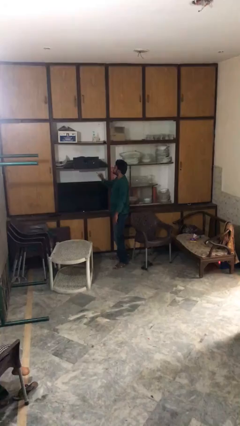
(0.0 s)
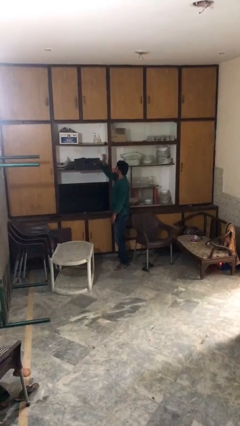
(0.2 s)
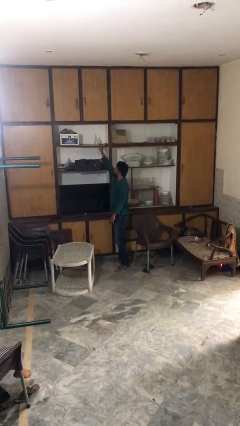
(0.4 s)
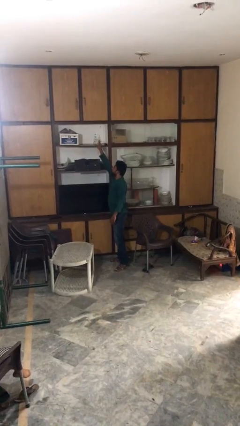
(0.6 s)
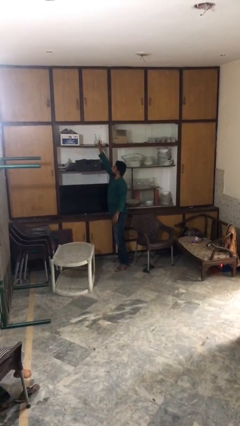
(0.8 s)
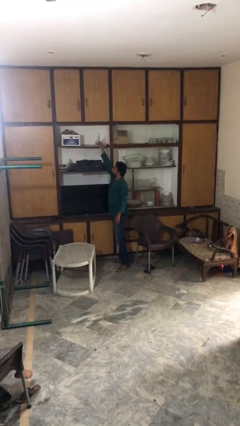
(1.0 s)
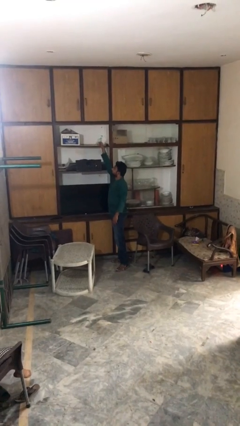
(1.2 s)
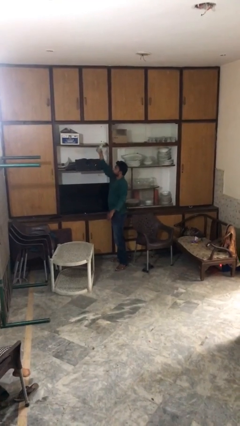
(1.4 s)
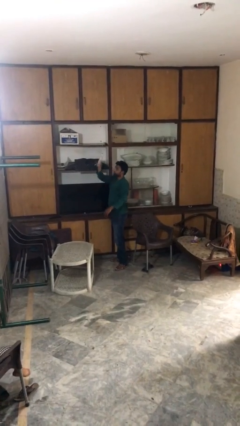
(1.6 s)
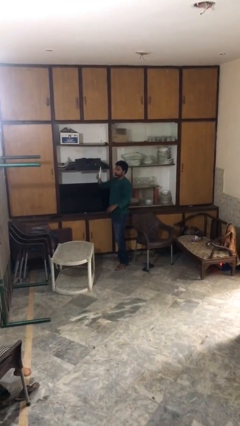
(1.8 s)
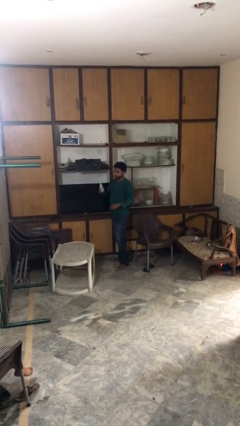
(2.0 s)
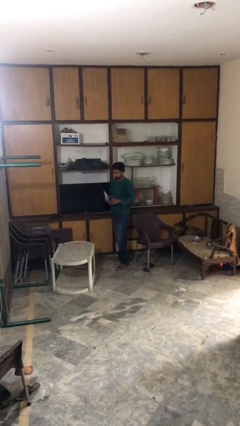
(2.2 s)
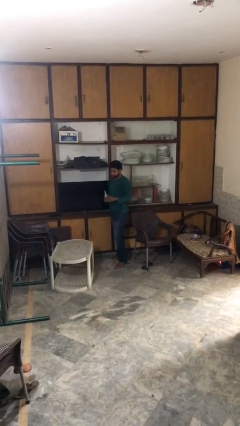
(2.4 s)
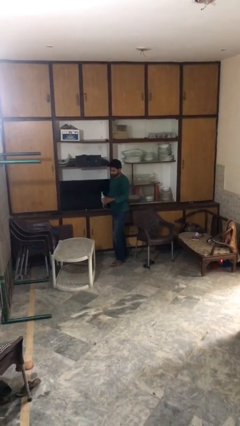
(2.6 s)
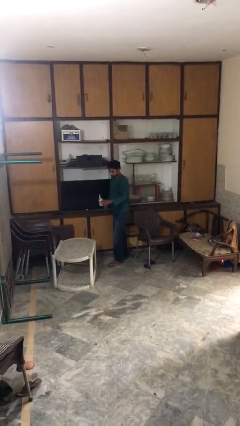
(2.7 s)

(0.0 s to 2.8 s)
person picks up object from shelf

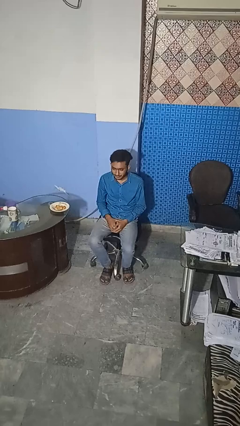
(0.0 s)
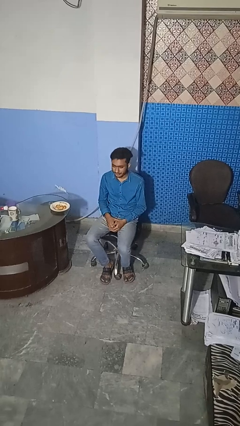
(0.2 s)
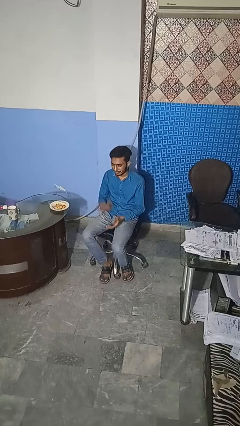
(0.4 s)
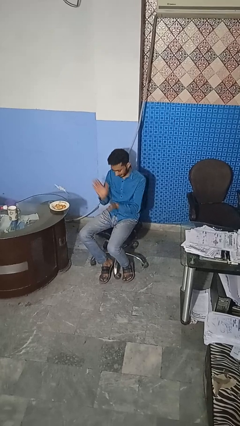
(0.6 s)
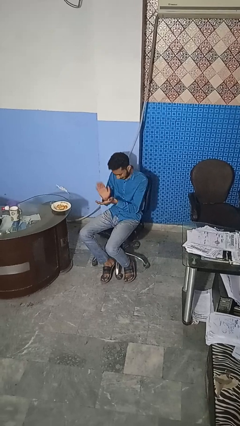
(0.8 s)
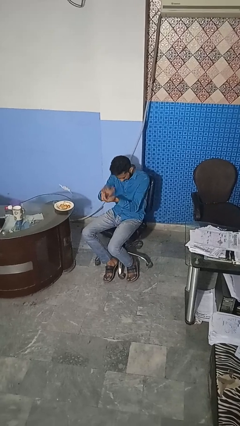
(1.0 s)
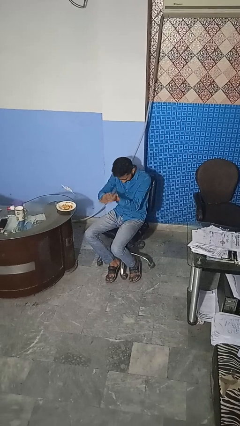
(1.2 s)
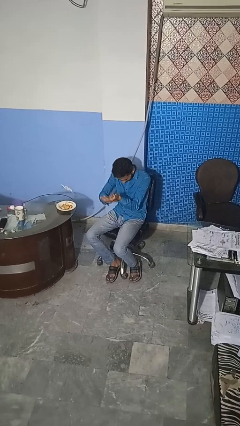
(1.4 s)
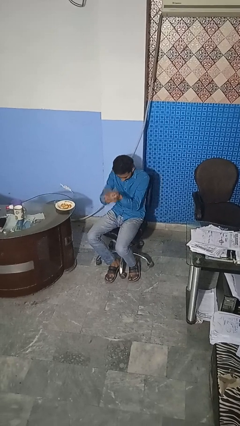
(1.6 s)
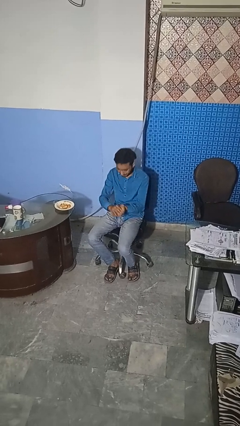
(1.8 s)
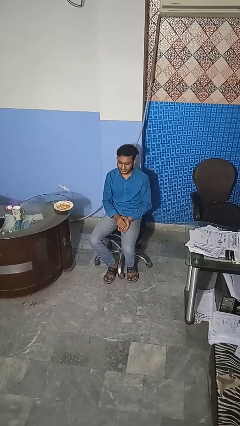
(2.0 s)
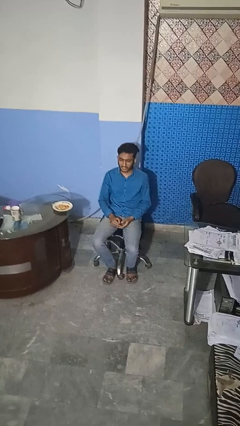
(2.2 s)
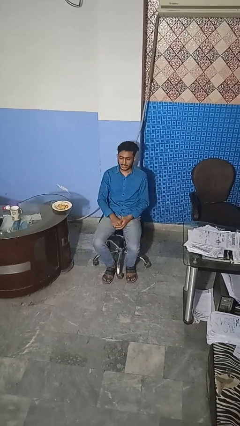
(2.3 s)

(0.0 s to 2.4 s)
person claps hands

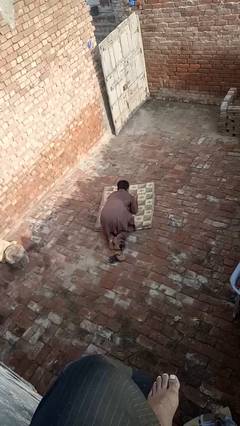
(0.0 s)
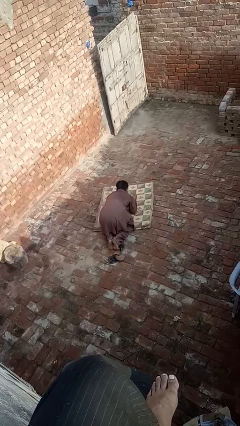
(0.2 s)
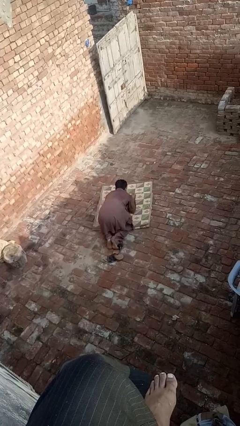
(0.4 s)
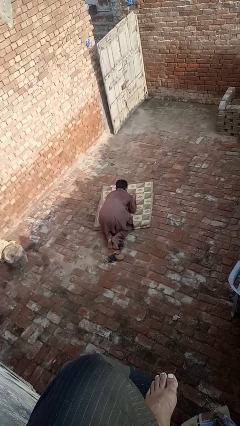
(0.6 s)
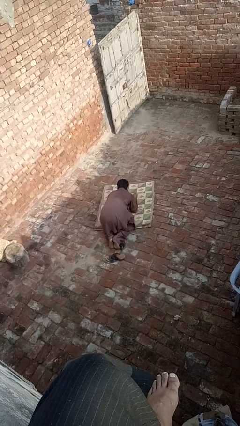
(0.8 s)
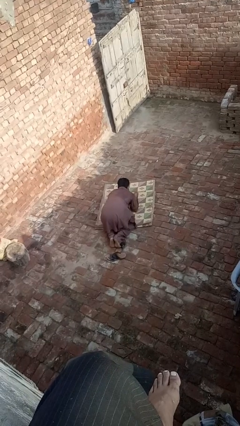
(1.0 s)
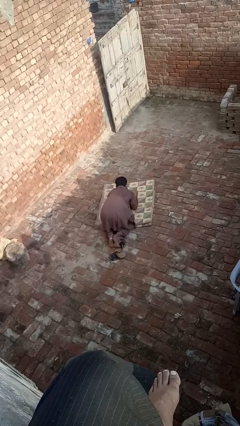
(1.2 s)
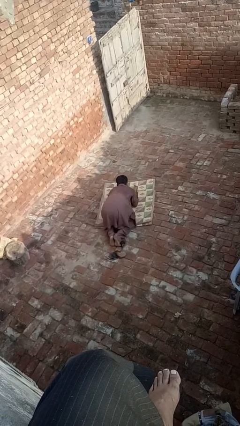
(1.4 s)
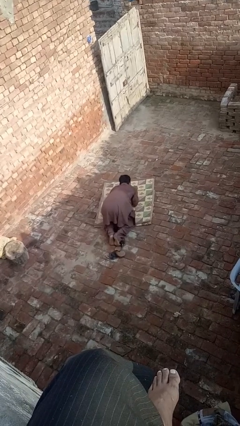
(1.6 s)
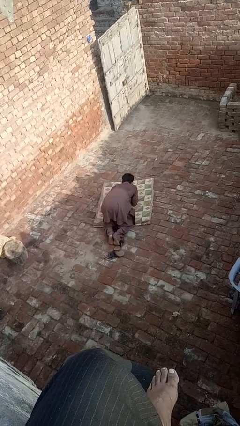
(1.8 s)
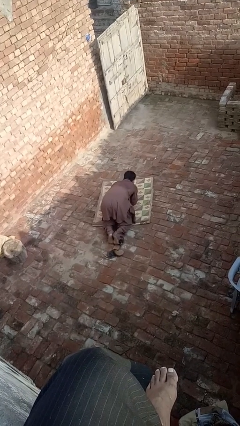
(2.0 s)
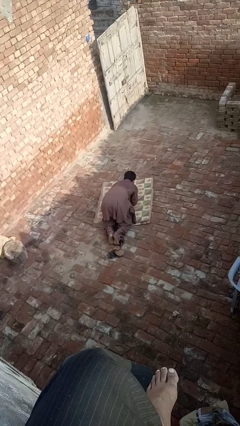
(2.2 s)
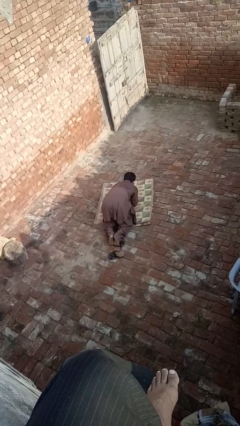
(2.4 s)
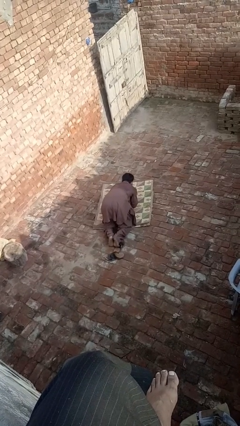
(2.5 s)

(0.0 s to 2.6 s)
person crawls

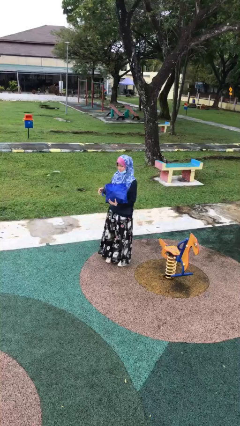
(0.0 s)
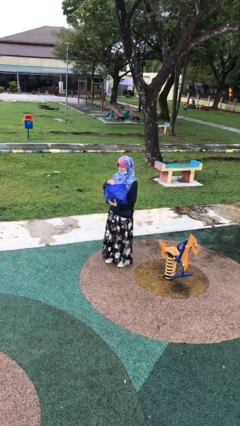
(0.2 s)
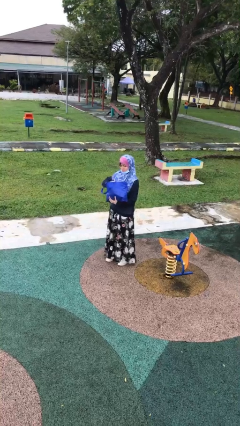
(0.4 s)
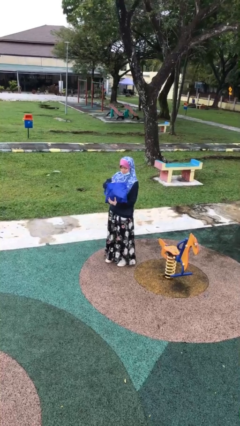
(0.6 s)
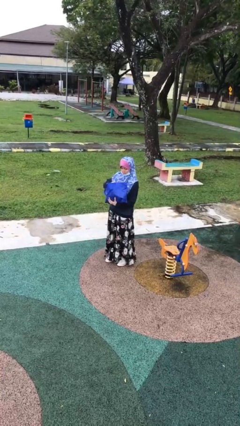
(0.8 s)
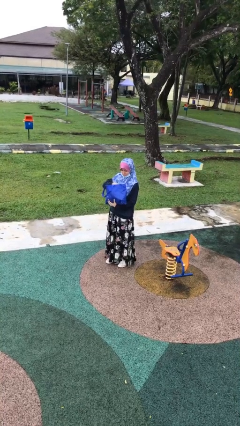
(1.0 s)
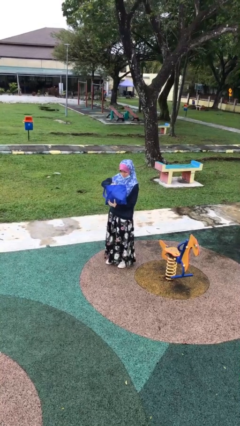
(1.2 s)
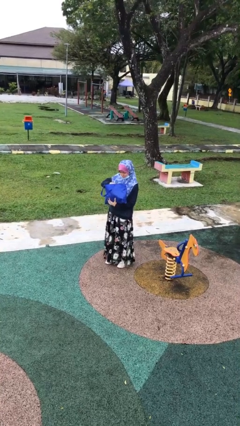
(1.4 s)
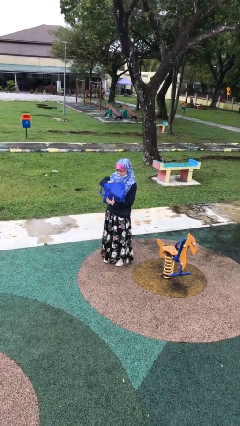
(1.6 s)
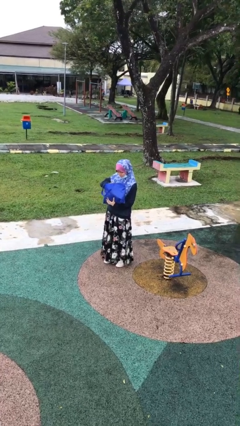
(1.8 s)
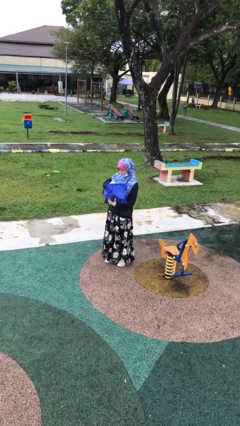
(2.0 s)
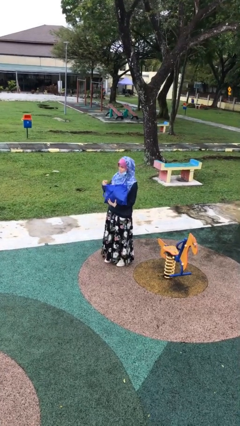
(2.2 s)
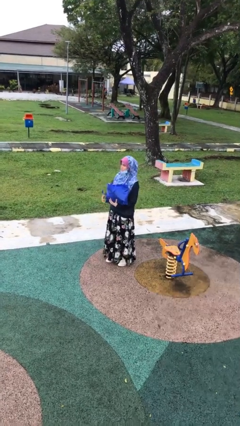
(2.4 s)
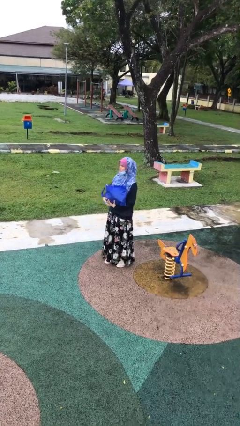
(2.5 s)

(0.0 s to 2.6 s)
person searches in bag

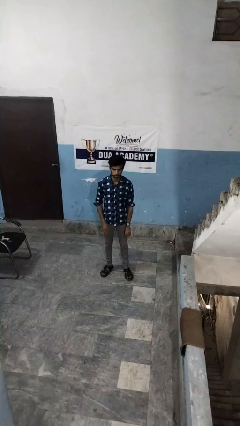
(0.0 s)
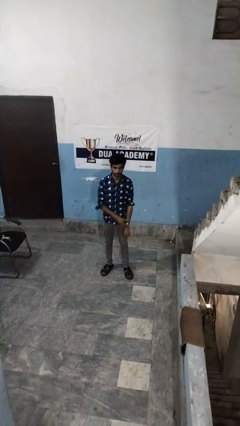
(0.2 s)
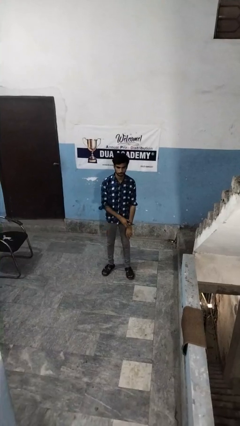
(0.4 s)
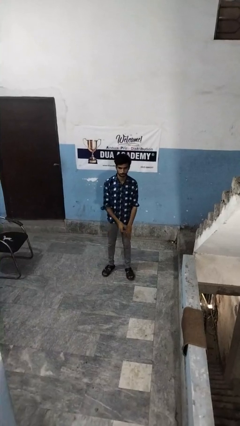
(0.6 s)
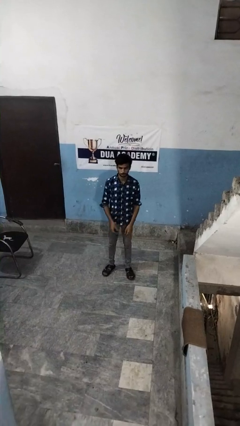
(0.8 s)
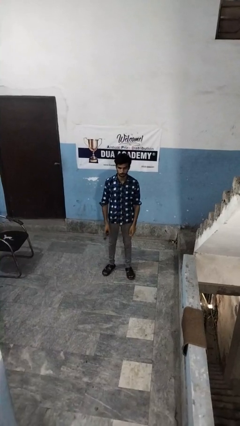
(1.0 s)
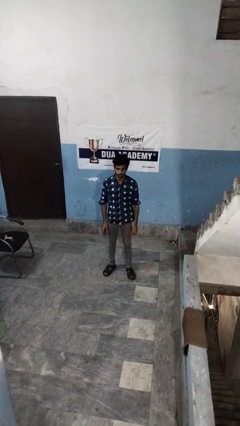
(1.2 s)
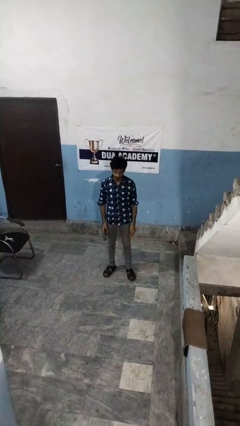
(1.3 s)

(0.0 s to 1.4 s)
person takes off wristwatch

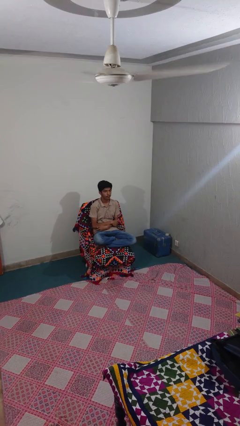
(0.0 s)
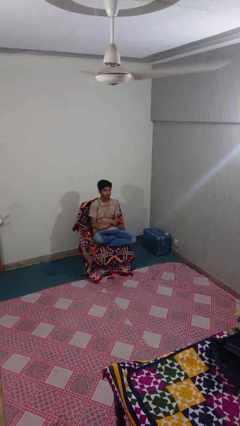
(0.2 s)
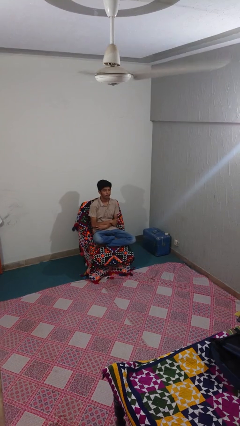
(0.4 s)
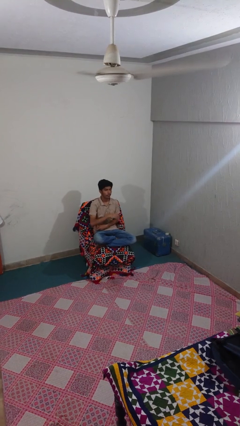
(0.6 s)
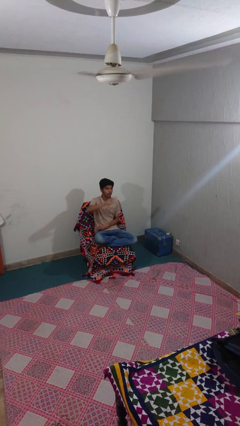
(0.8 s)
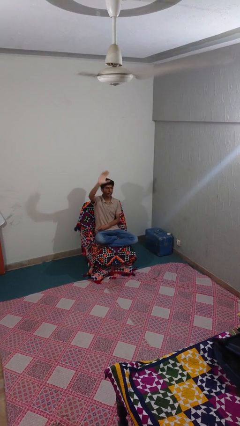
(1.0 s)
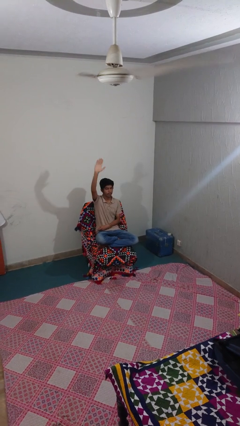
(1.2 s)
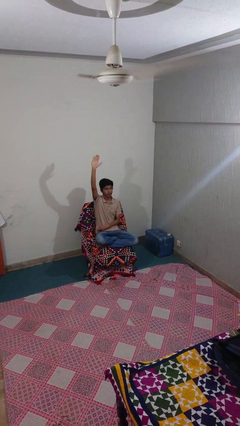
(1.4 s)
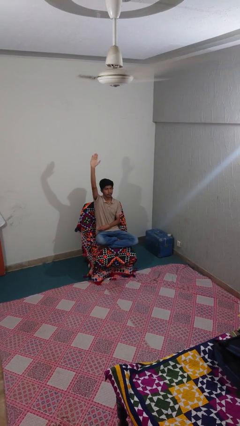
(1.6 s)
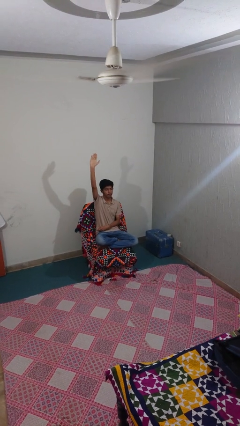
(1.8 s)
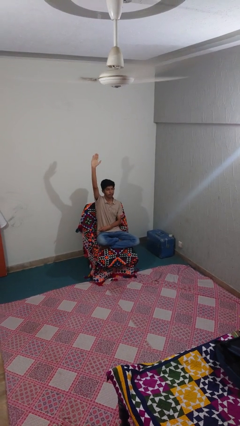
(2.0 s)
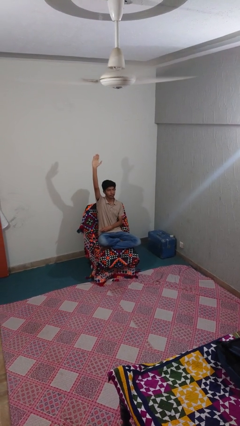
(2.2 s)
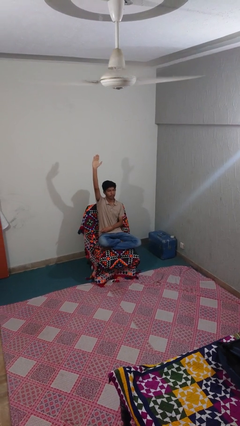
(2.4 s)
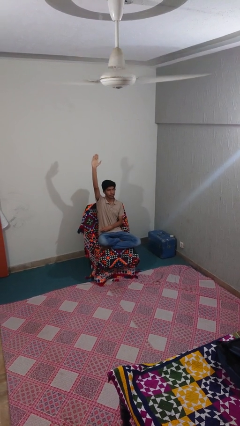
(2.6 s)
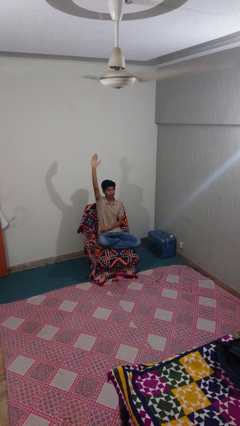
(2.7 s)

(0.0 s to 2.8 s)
person gestures raise hand

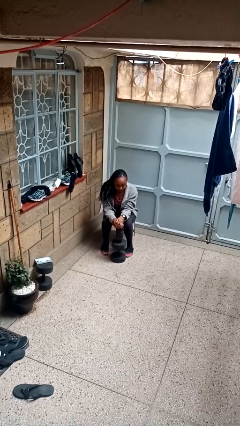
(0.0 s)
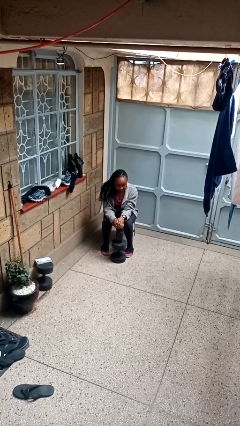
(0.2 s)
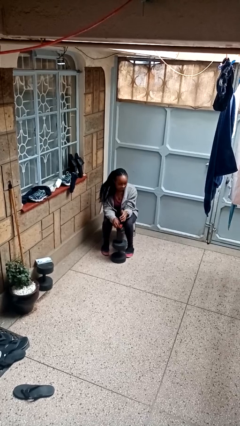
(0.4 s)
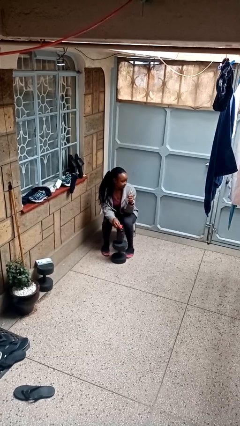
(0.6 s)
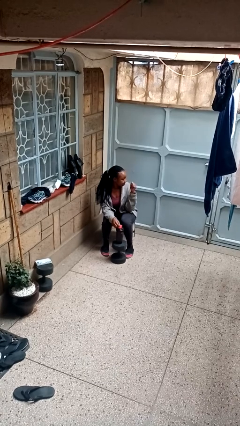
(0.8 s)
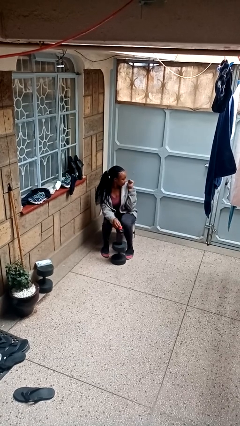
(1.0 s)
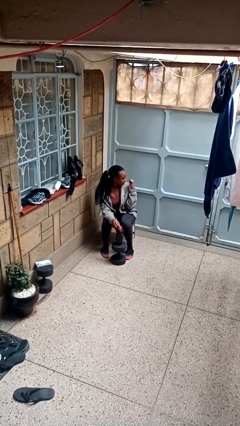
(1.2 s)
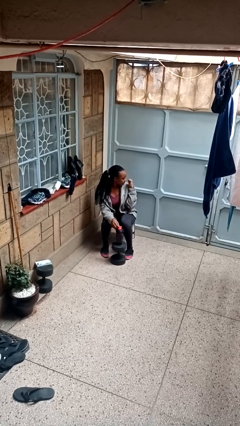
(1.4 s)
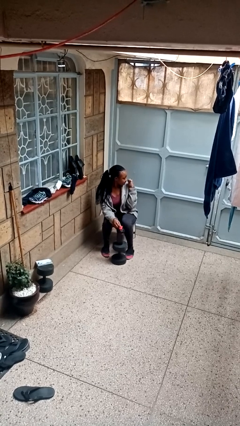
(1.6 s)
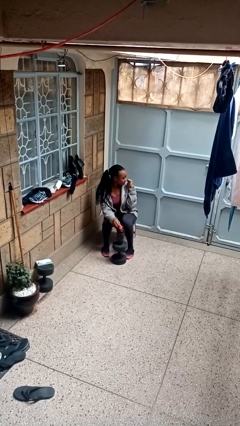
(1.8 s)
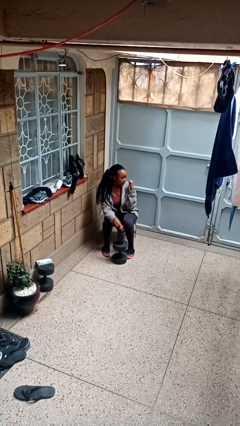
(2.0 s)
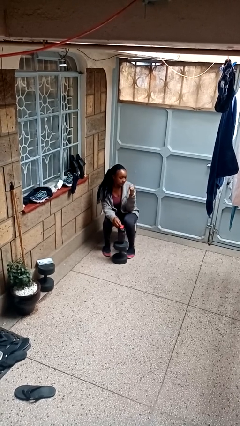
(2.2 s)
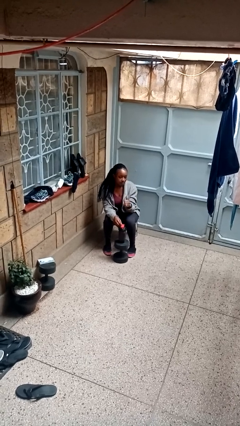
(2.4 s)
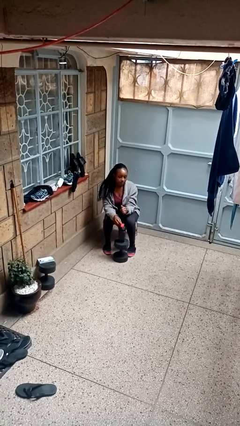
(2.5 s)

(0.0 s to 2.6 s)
person gestures behind me
